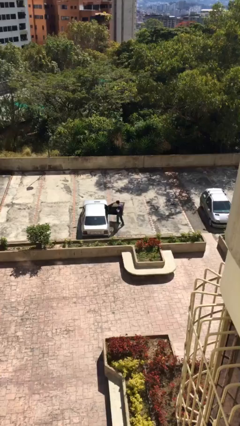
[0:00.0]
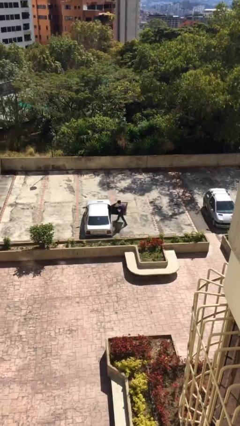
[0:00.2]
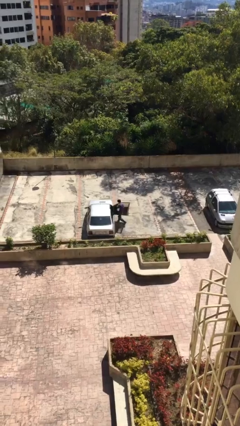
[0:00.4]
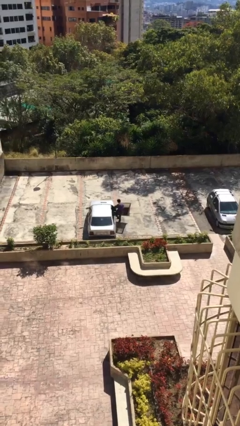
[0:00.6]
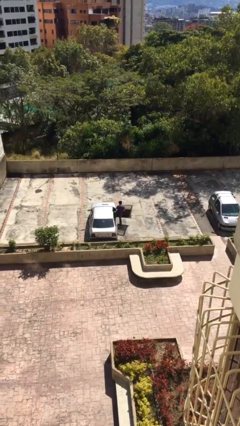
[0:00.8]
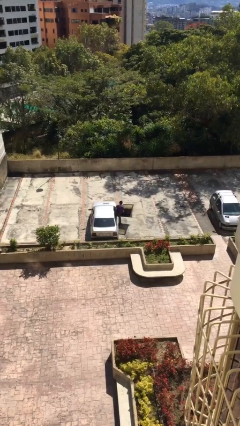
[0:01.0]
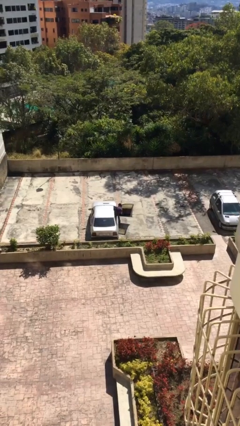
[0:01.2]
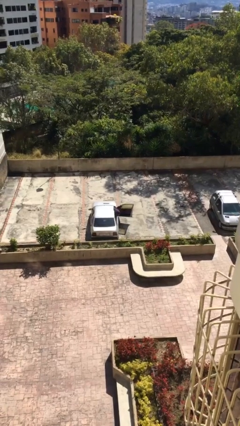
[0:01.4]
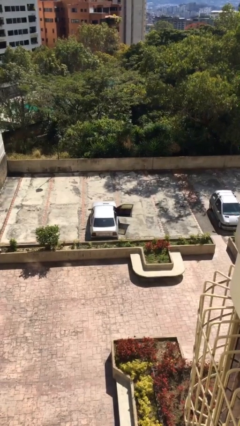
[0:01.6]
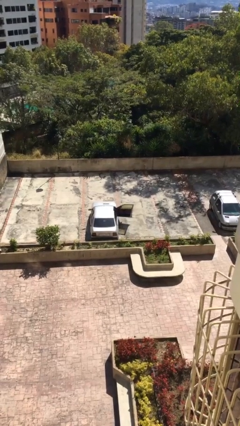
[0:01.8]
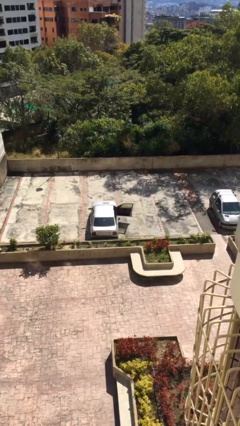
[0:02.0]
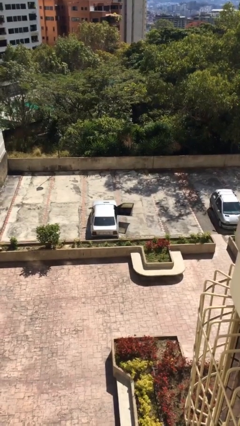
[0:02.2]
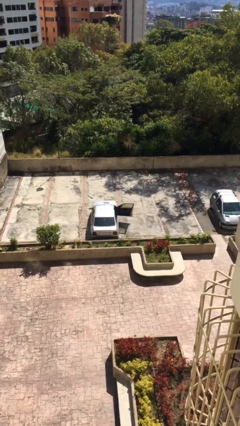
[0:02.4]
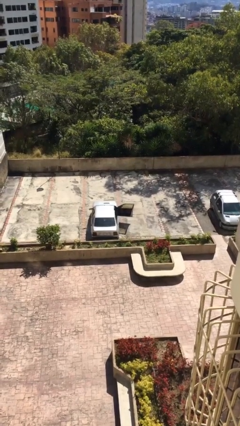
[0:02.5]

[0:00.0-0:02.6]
person enters car

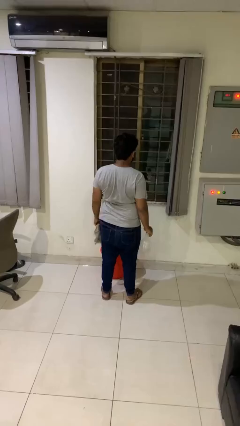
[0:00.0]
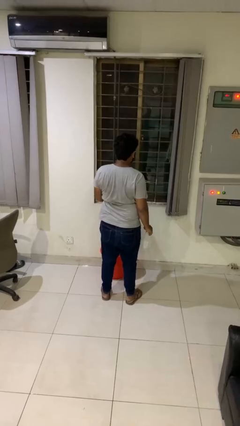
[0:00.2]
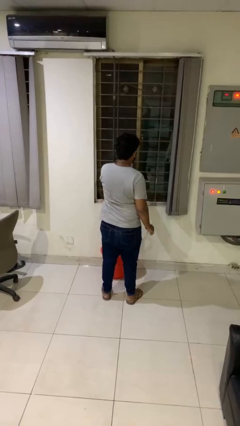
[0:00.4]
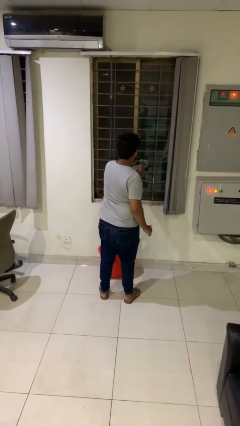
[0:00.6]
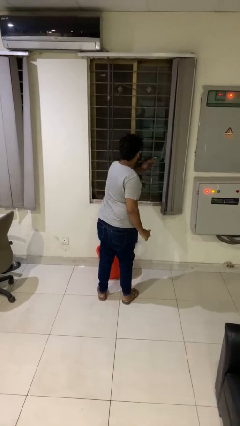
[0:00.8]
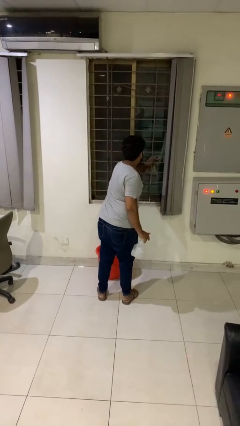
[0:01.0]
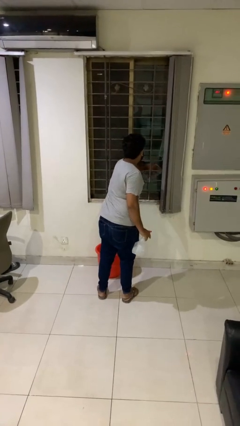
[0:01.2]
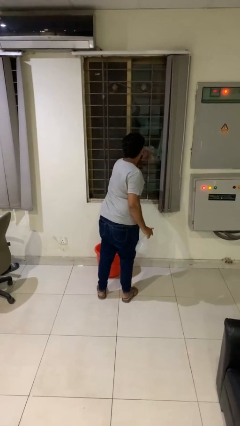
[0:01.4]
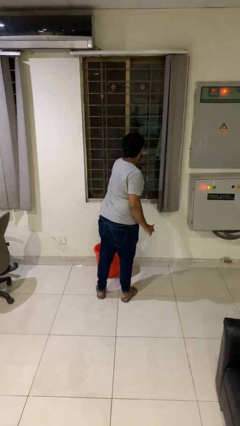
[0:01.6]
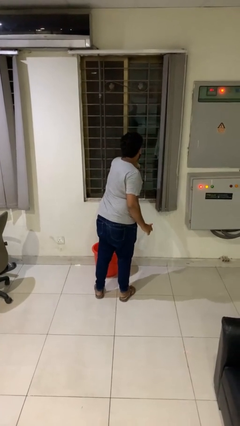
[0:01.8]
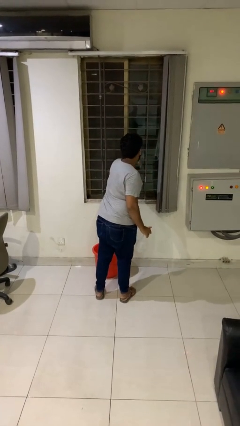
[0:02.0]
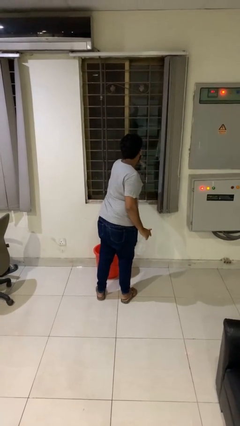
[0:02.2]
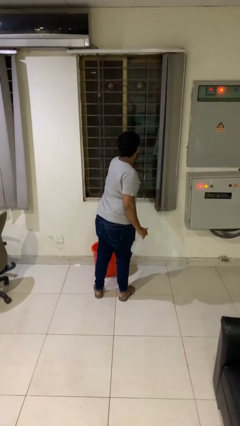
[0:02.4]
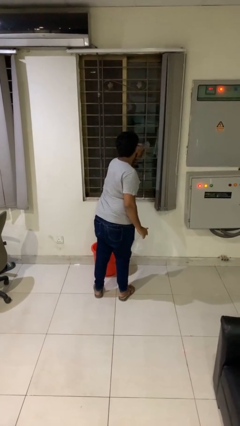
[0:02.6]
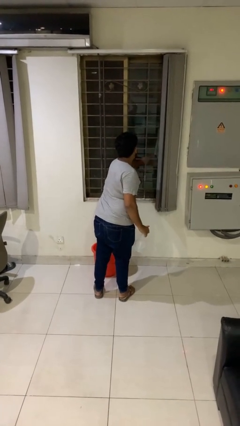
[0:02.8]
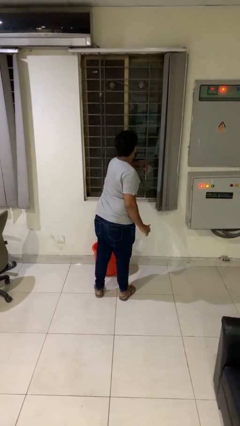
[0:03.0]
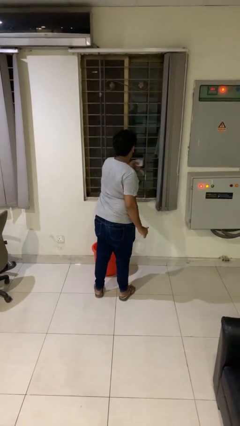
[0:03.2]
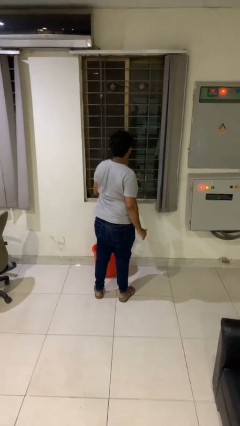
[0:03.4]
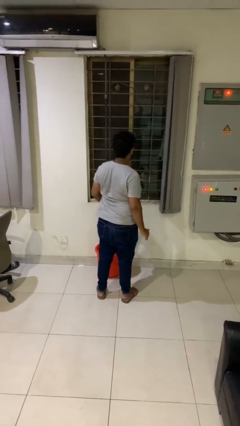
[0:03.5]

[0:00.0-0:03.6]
person washes window

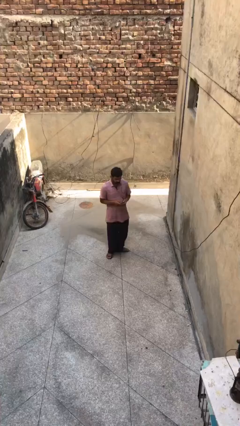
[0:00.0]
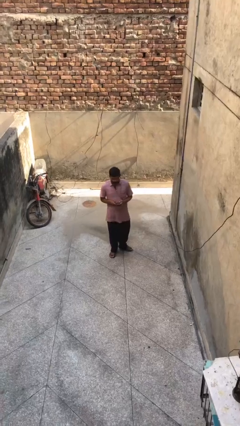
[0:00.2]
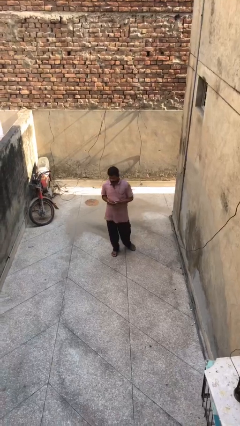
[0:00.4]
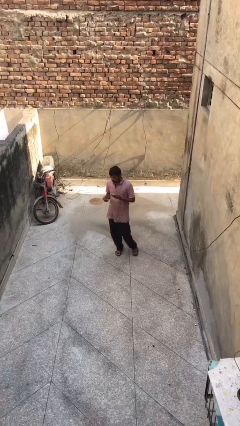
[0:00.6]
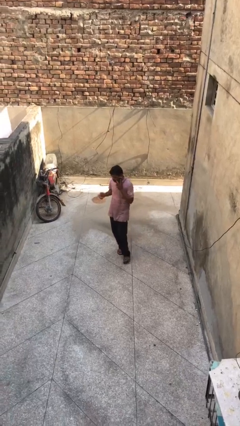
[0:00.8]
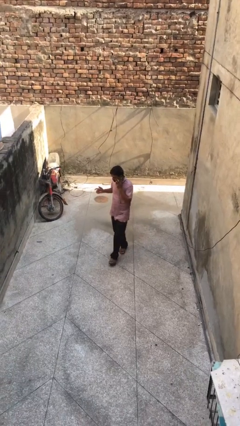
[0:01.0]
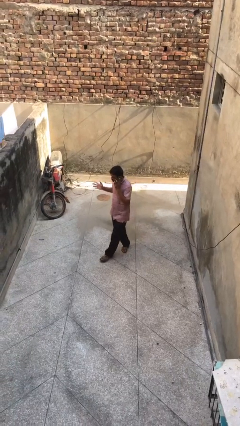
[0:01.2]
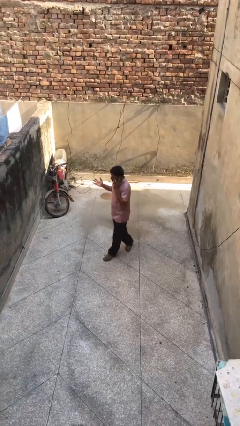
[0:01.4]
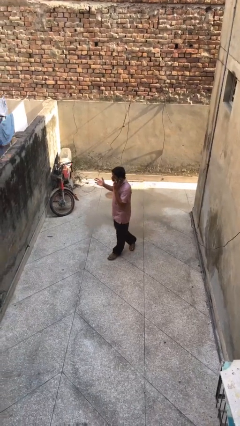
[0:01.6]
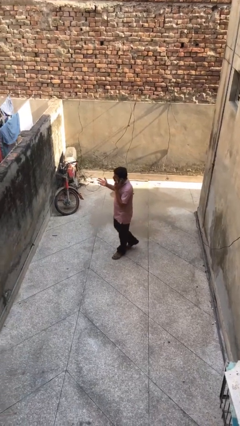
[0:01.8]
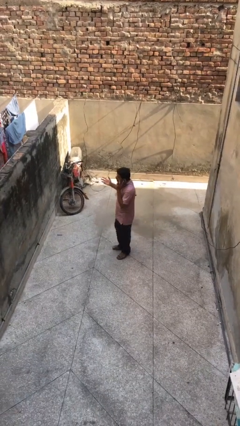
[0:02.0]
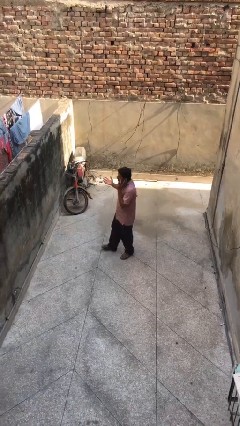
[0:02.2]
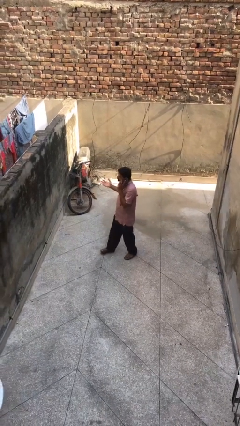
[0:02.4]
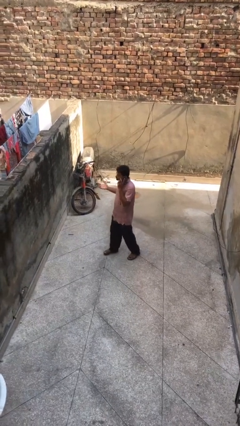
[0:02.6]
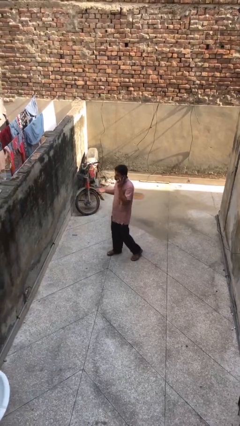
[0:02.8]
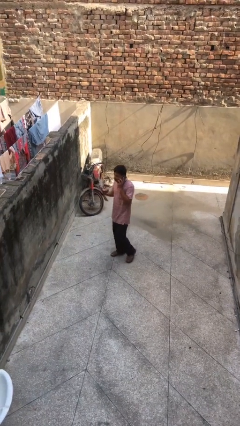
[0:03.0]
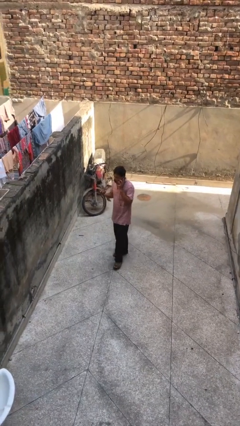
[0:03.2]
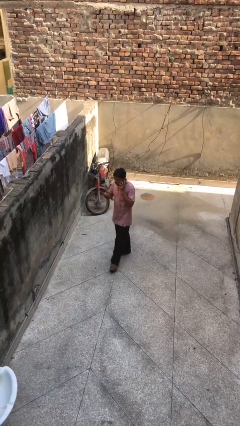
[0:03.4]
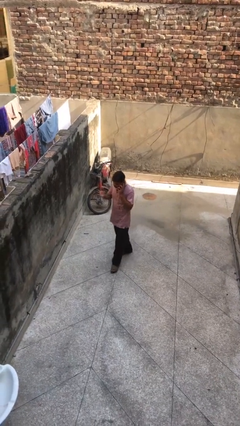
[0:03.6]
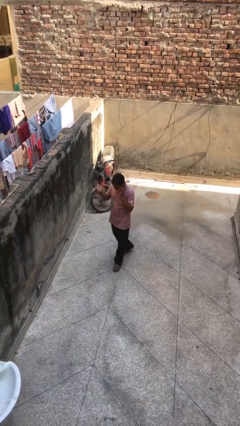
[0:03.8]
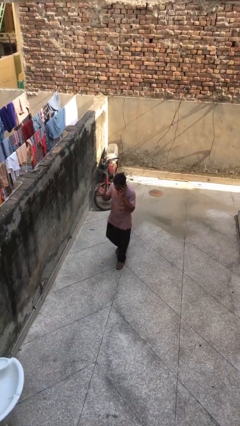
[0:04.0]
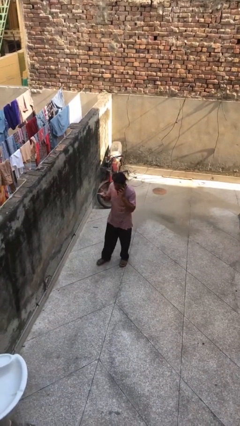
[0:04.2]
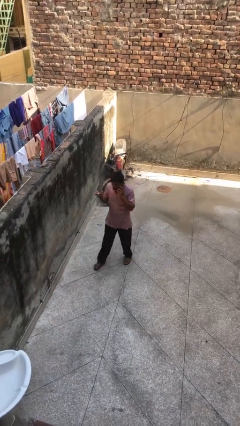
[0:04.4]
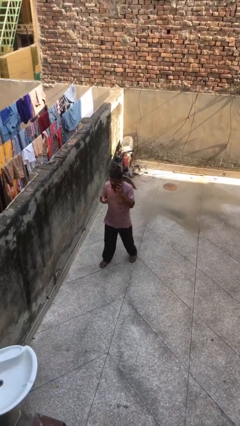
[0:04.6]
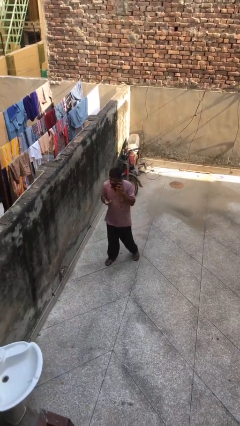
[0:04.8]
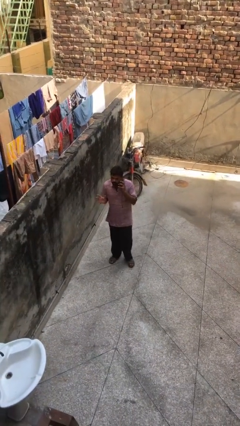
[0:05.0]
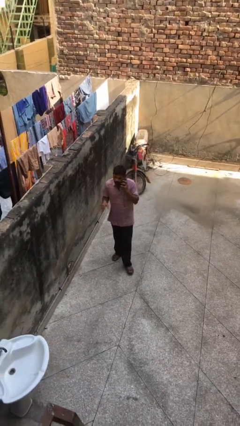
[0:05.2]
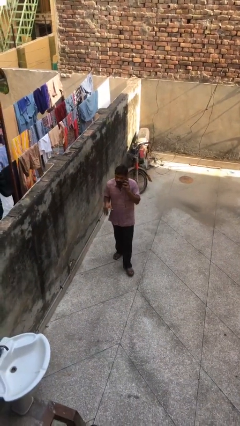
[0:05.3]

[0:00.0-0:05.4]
person talks on phone

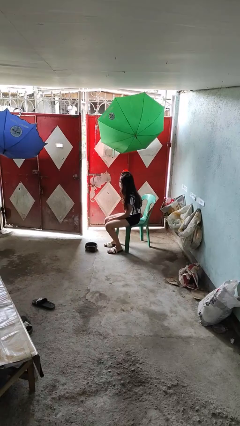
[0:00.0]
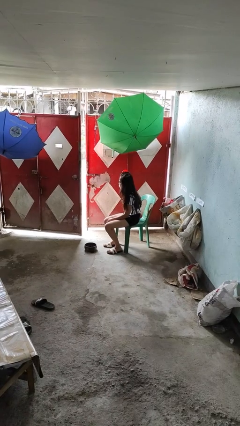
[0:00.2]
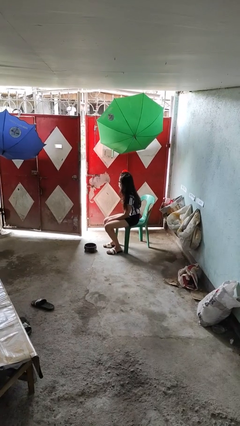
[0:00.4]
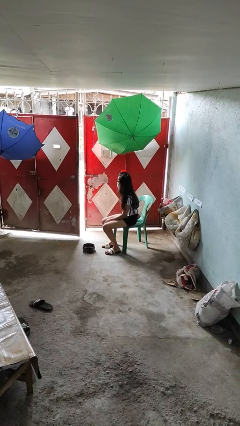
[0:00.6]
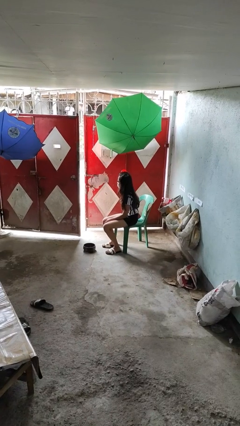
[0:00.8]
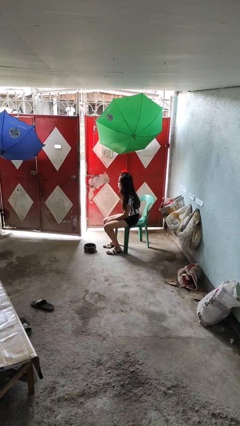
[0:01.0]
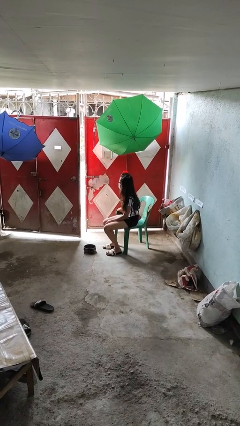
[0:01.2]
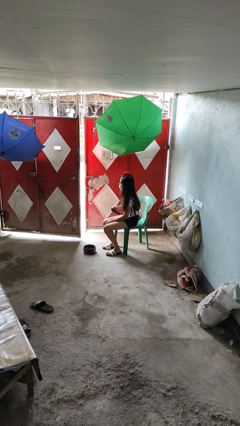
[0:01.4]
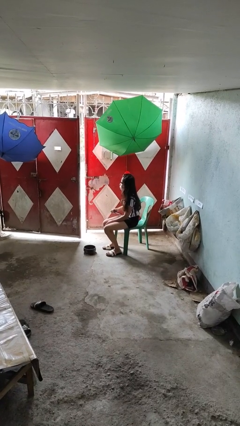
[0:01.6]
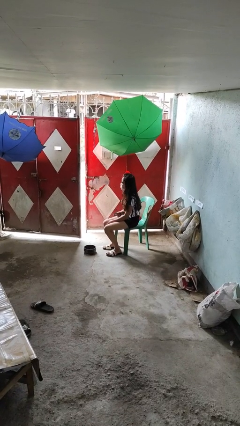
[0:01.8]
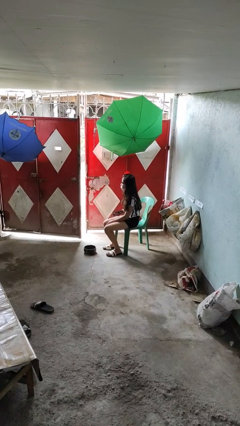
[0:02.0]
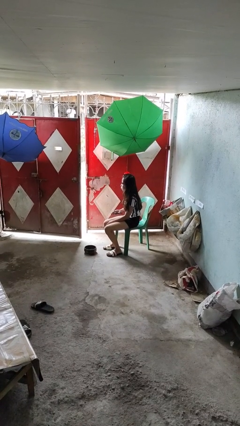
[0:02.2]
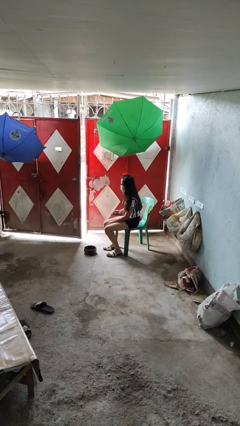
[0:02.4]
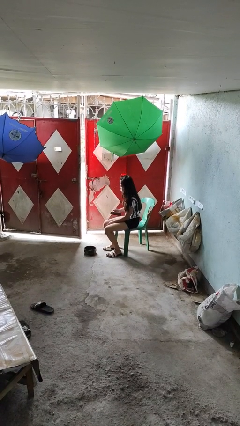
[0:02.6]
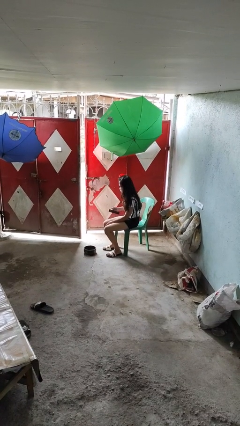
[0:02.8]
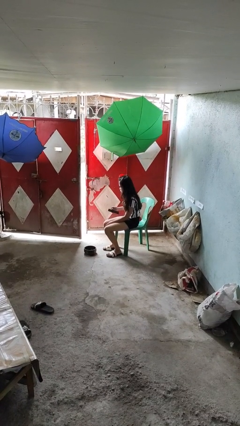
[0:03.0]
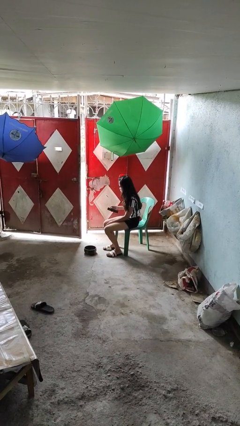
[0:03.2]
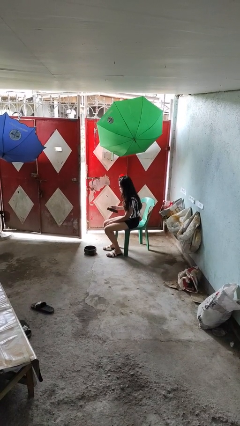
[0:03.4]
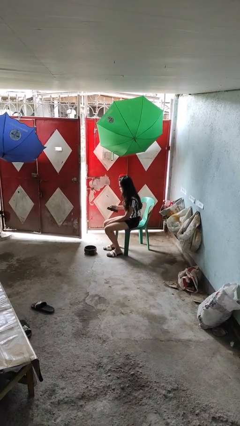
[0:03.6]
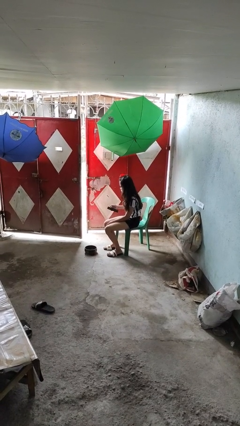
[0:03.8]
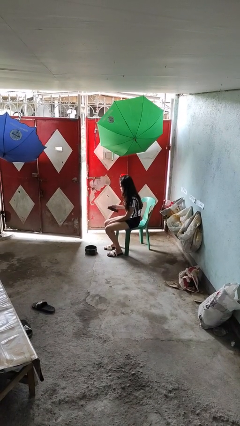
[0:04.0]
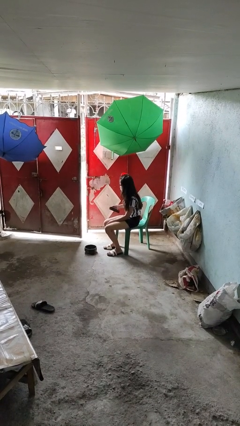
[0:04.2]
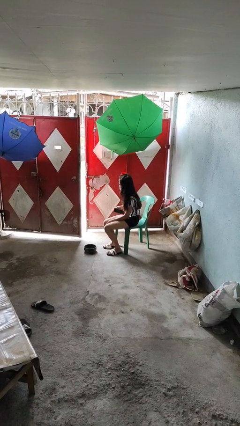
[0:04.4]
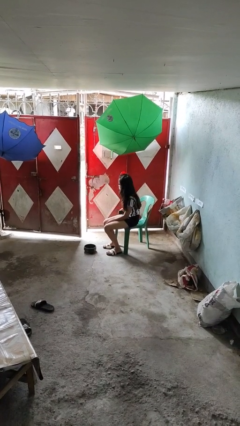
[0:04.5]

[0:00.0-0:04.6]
person takes phone from pocket

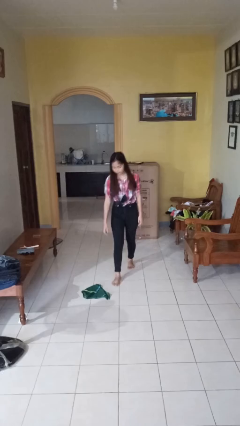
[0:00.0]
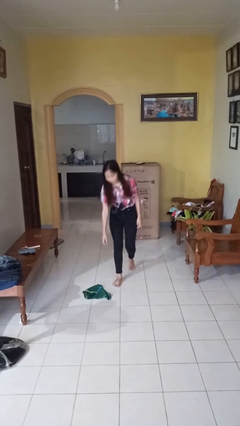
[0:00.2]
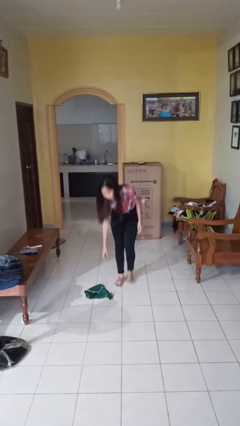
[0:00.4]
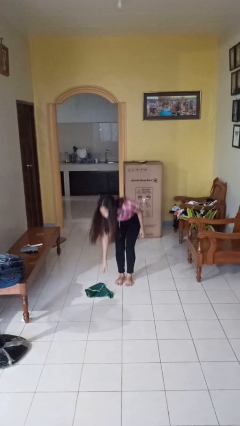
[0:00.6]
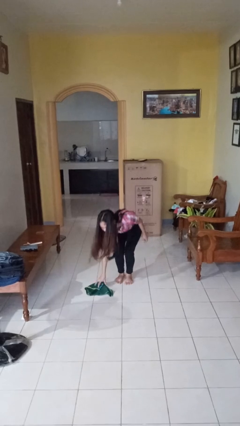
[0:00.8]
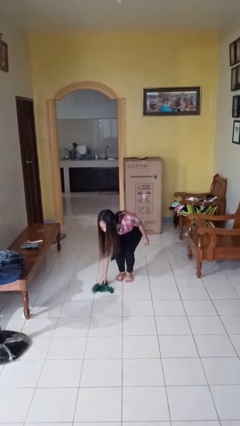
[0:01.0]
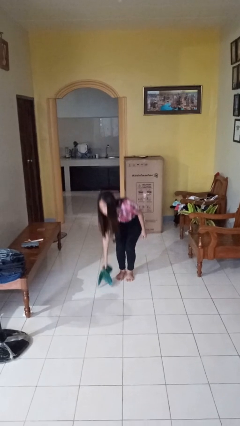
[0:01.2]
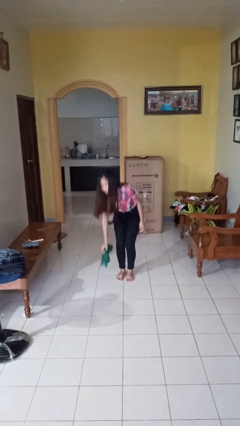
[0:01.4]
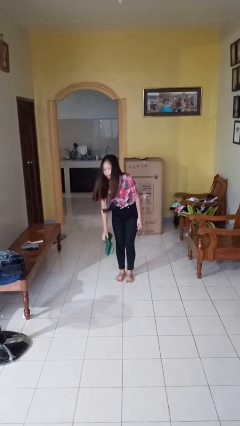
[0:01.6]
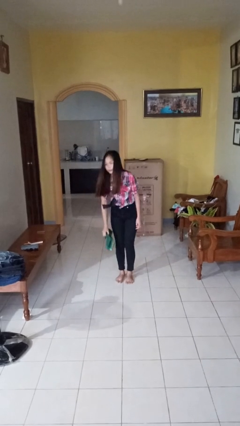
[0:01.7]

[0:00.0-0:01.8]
person picks up object from floor

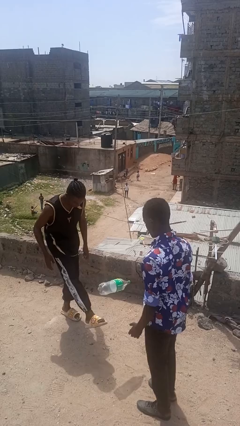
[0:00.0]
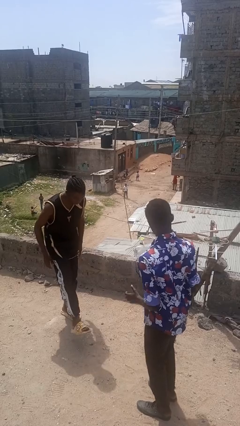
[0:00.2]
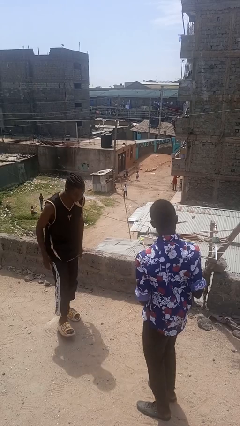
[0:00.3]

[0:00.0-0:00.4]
person kicks object to person
